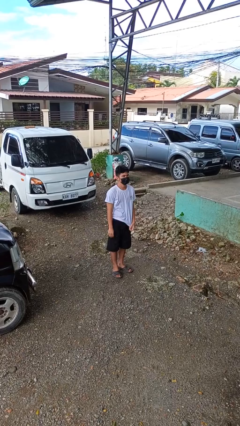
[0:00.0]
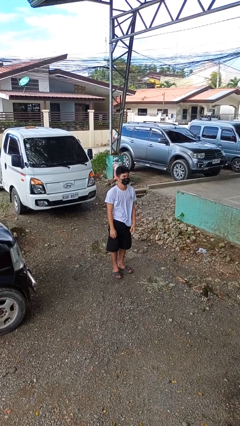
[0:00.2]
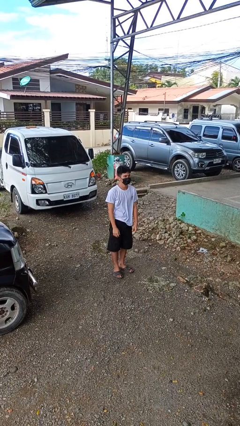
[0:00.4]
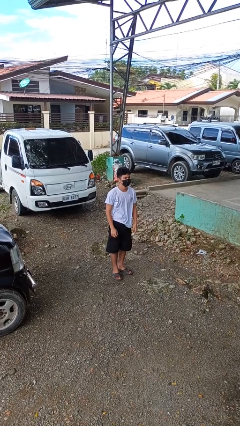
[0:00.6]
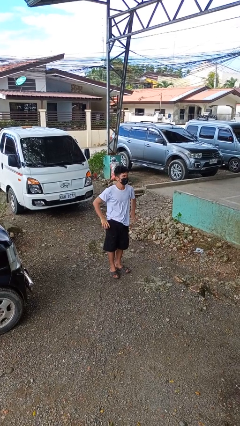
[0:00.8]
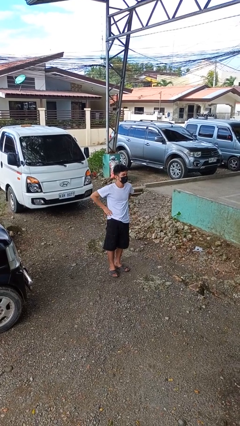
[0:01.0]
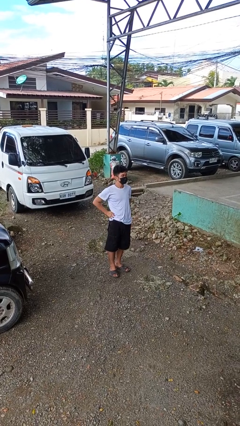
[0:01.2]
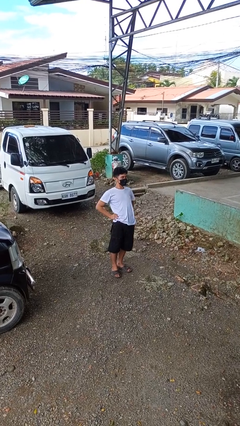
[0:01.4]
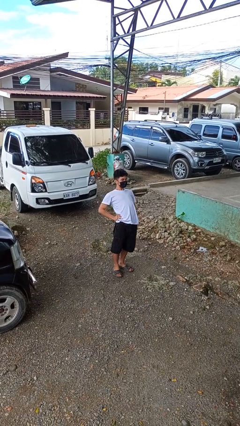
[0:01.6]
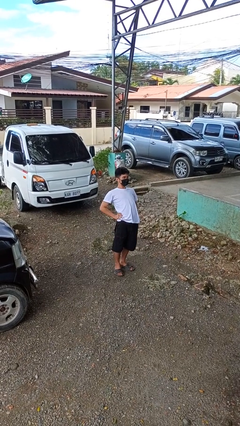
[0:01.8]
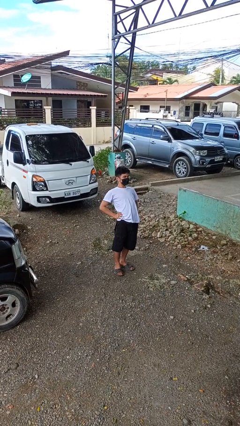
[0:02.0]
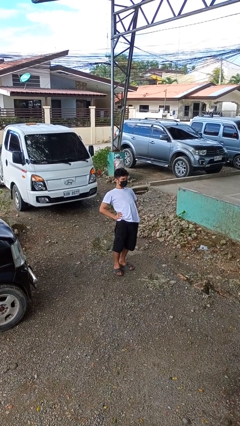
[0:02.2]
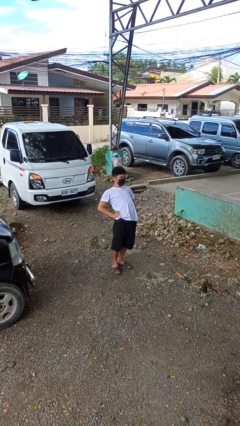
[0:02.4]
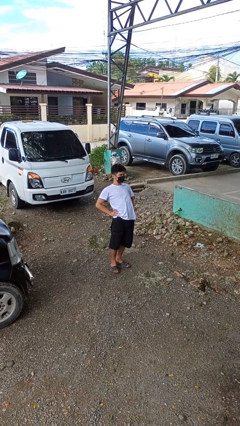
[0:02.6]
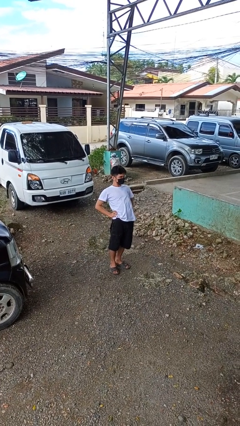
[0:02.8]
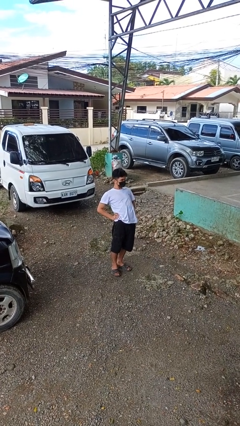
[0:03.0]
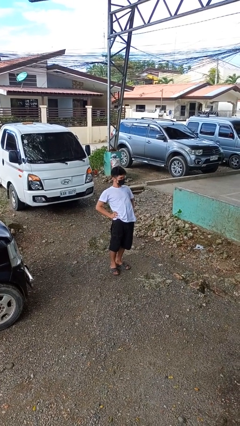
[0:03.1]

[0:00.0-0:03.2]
person stretches back

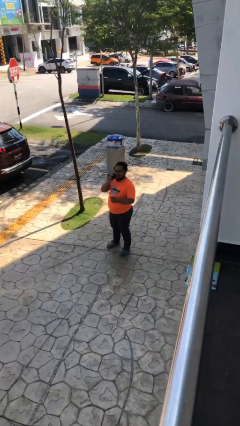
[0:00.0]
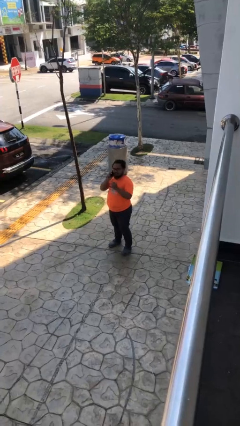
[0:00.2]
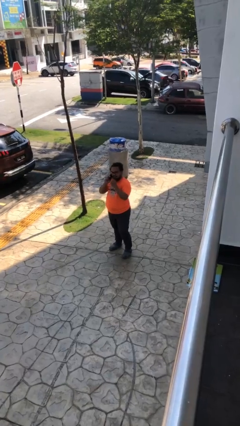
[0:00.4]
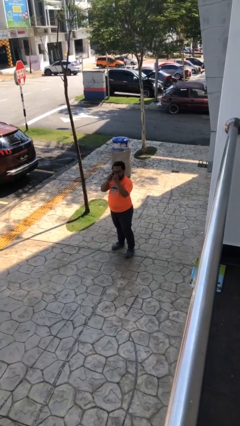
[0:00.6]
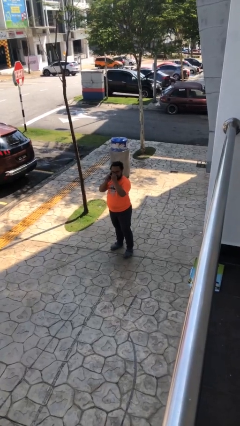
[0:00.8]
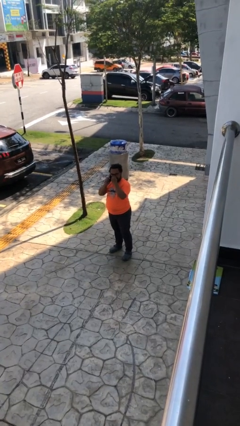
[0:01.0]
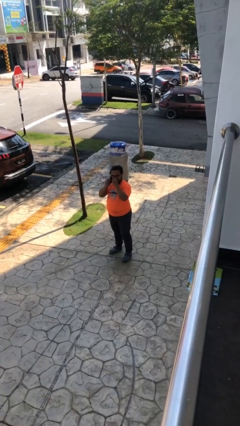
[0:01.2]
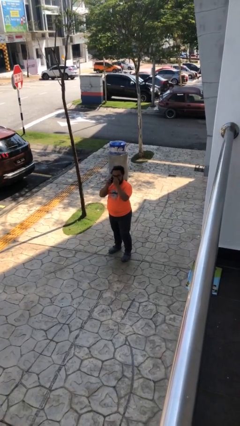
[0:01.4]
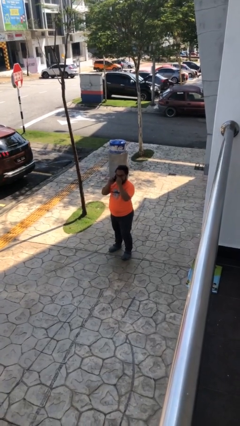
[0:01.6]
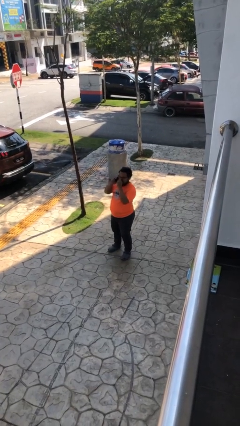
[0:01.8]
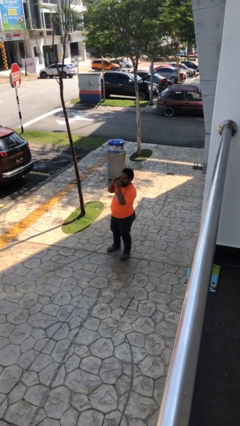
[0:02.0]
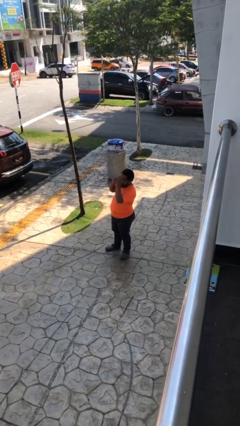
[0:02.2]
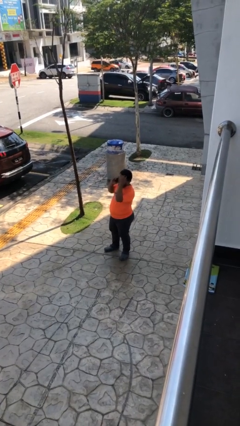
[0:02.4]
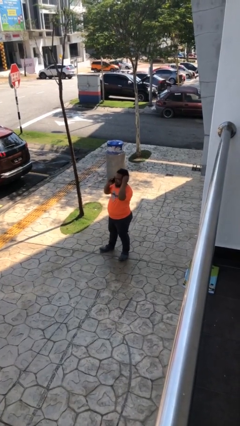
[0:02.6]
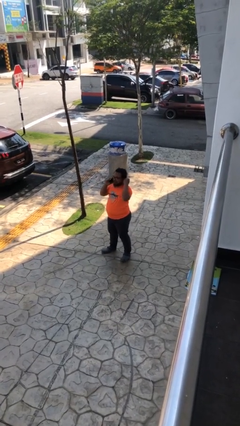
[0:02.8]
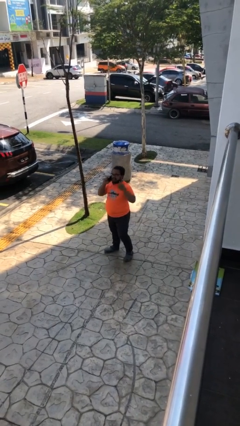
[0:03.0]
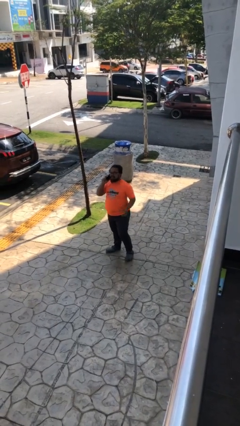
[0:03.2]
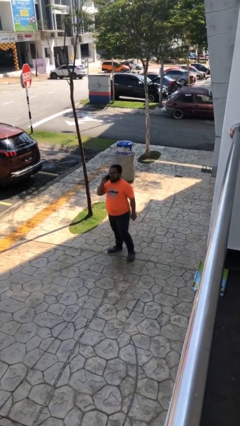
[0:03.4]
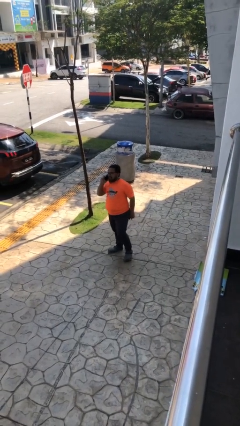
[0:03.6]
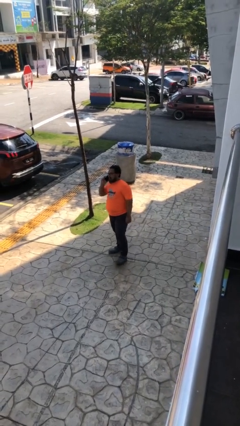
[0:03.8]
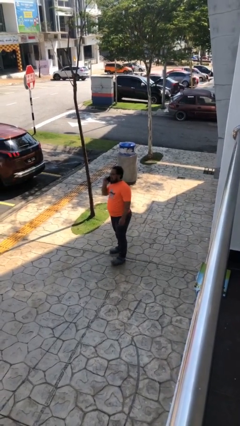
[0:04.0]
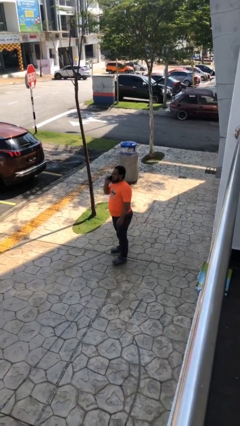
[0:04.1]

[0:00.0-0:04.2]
person talks on phone

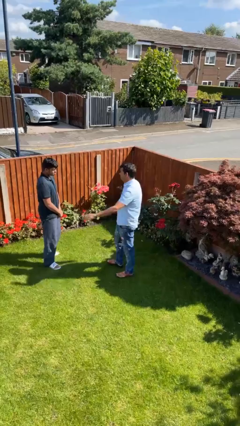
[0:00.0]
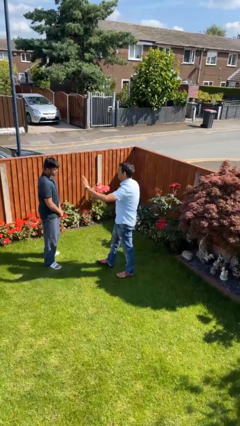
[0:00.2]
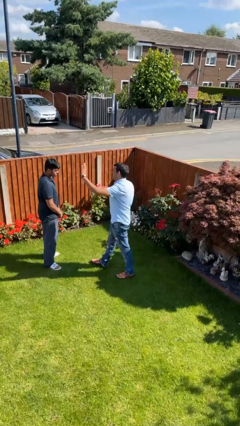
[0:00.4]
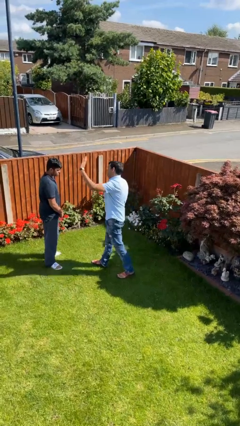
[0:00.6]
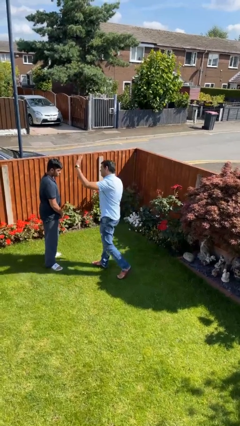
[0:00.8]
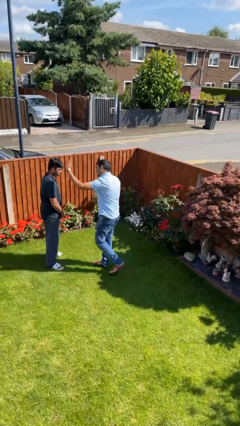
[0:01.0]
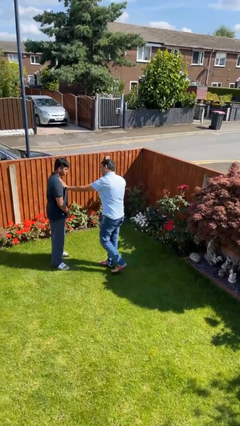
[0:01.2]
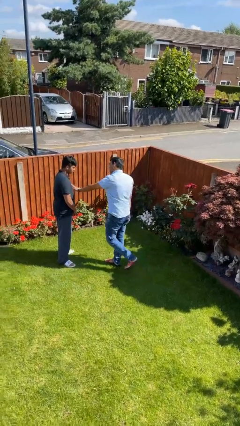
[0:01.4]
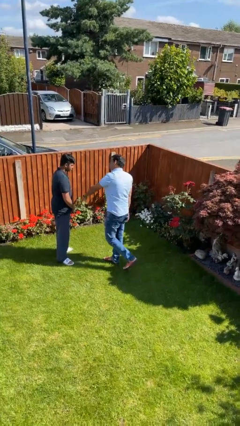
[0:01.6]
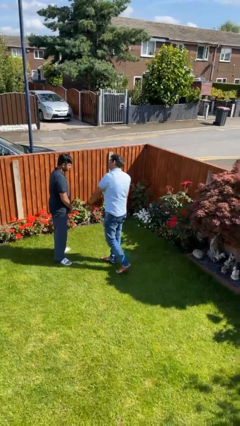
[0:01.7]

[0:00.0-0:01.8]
person shoves person

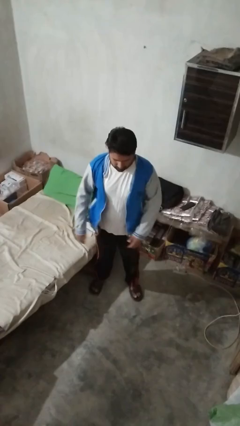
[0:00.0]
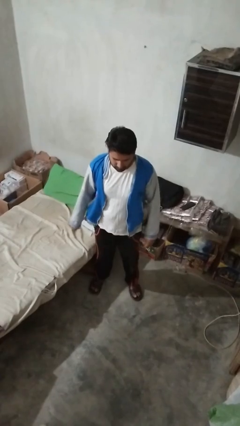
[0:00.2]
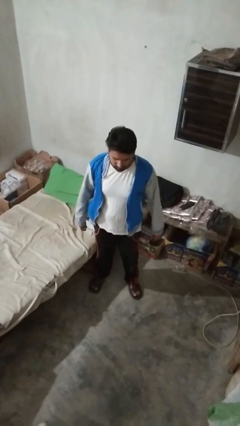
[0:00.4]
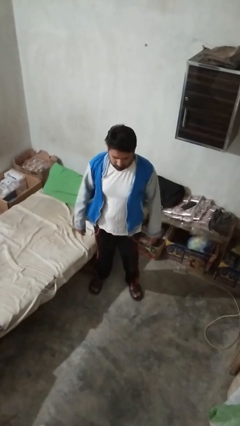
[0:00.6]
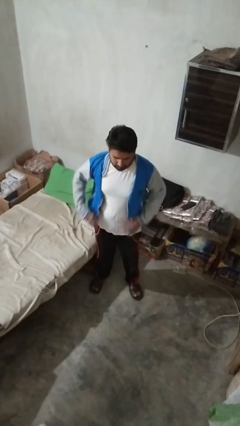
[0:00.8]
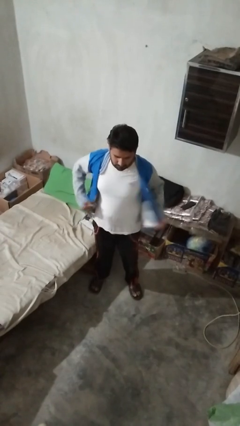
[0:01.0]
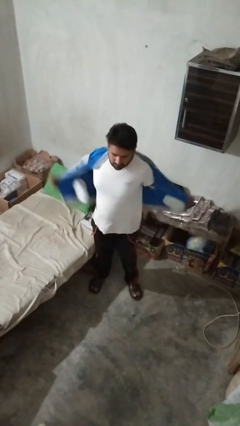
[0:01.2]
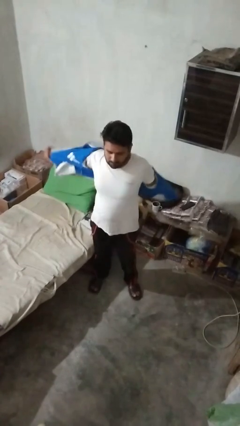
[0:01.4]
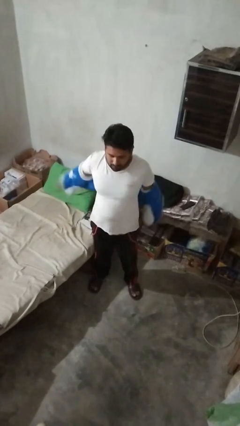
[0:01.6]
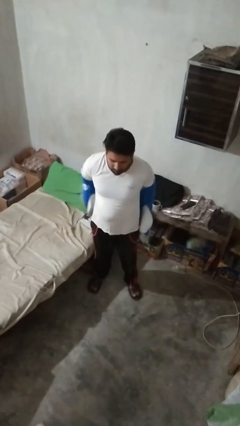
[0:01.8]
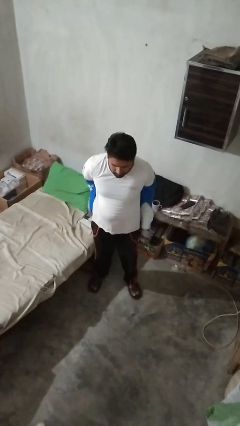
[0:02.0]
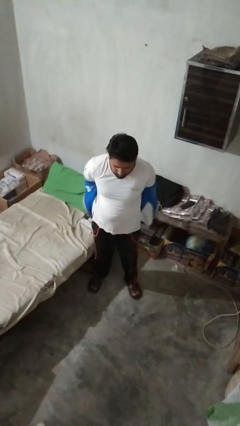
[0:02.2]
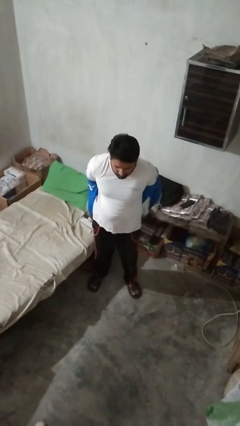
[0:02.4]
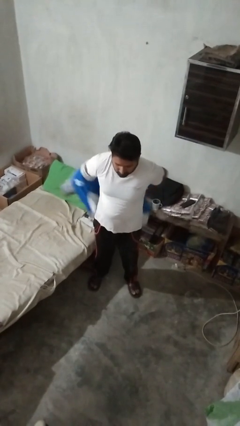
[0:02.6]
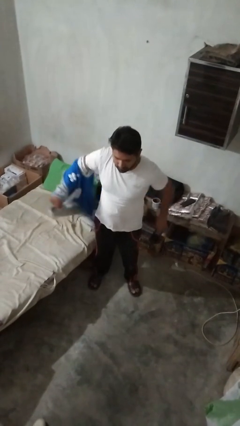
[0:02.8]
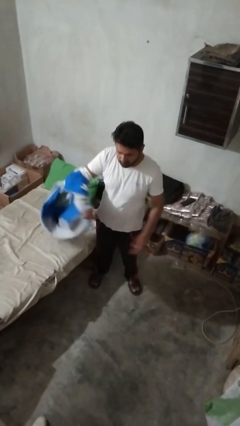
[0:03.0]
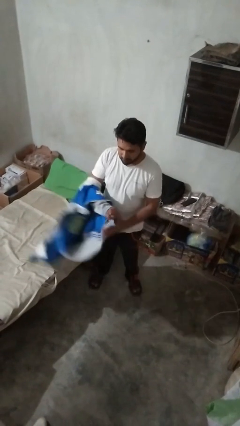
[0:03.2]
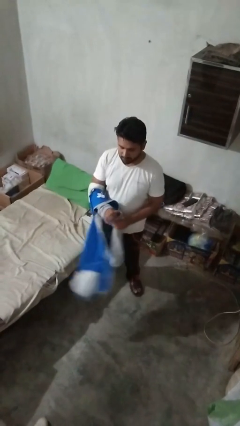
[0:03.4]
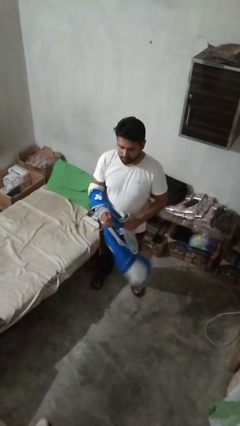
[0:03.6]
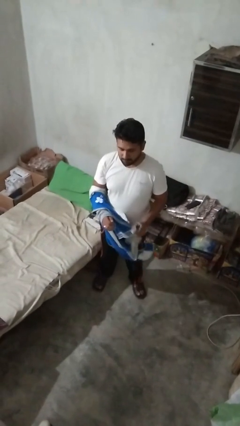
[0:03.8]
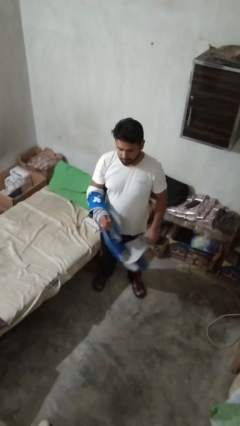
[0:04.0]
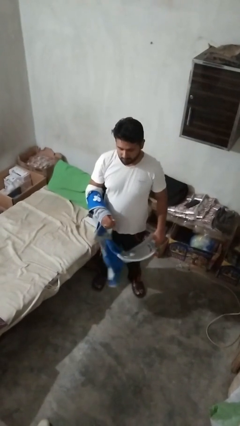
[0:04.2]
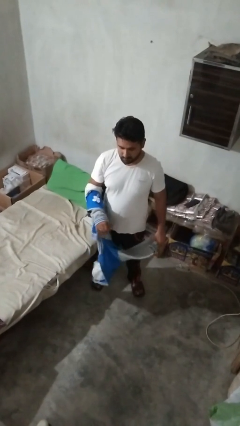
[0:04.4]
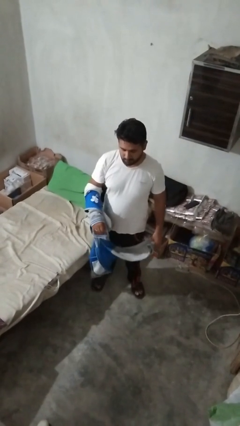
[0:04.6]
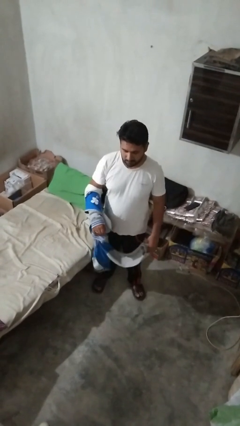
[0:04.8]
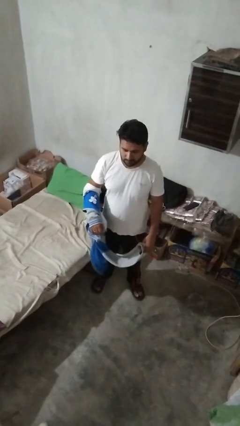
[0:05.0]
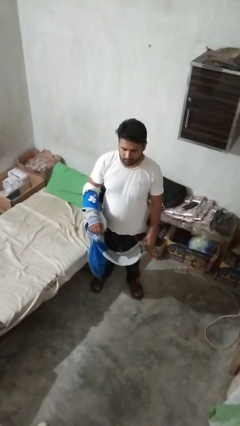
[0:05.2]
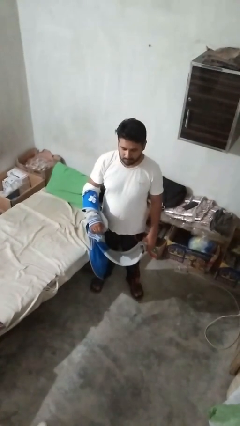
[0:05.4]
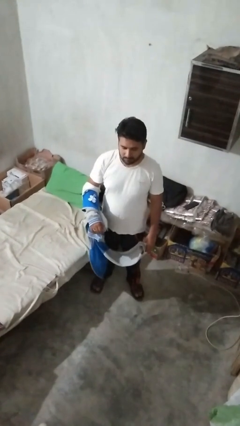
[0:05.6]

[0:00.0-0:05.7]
person takes off jacket

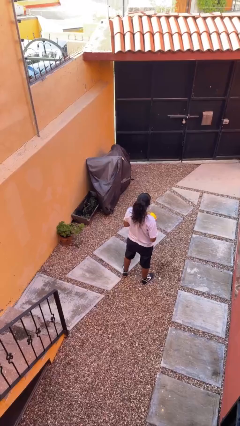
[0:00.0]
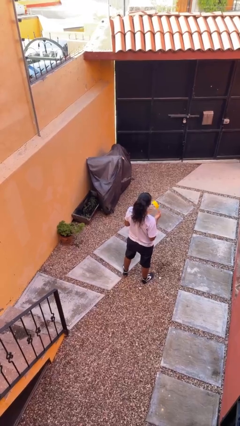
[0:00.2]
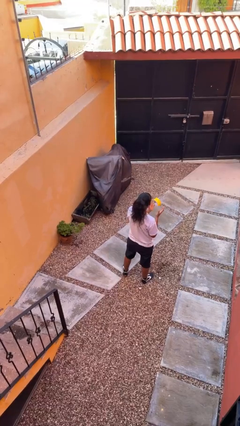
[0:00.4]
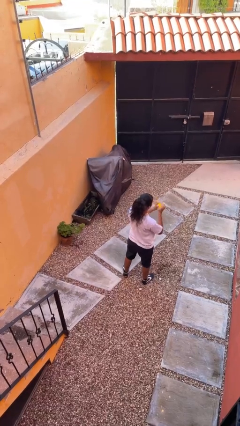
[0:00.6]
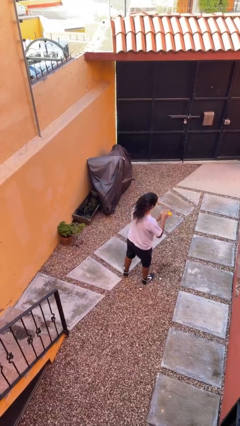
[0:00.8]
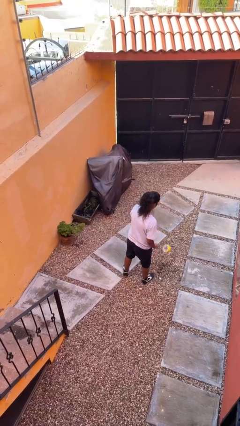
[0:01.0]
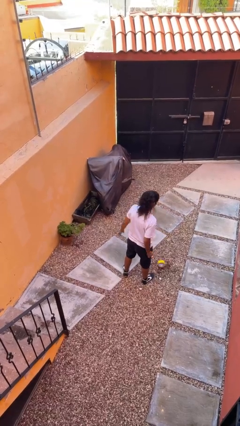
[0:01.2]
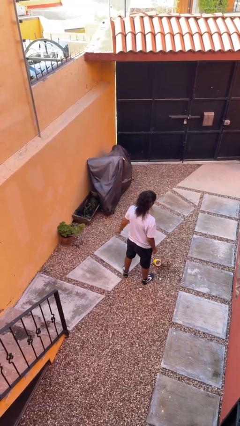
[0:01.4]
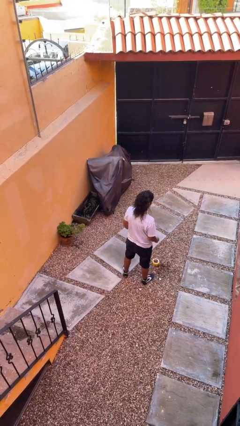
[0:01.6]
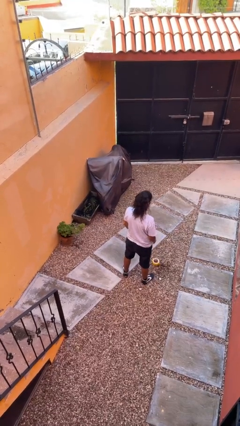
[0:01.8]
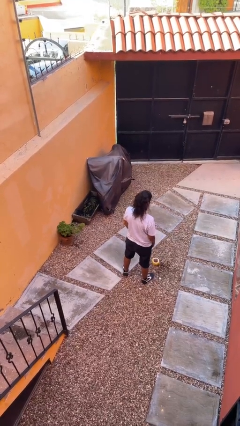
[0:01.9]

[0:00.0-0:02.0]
person drops object

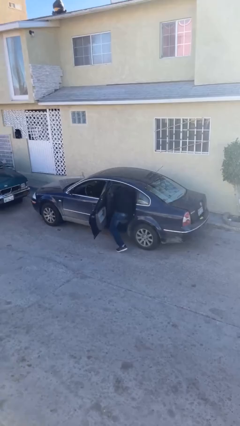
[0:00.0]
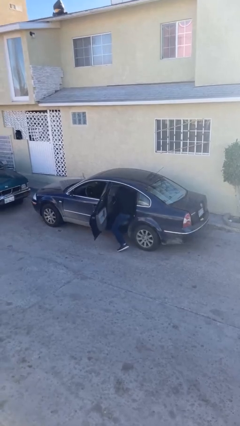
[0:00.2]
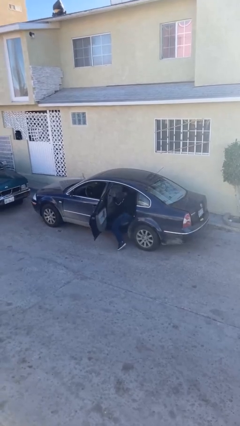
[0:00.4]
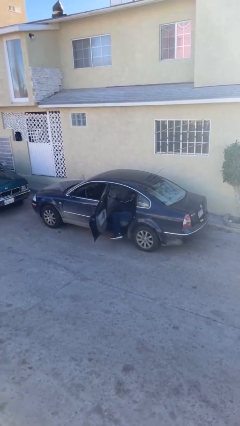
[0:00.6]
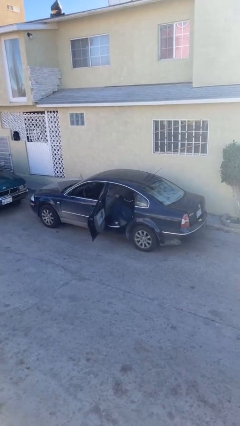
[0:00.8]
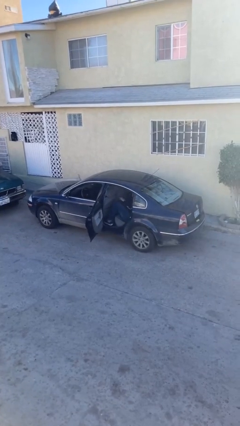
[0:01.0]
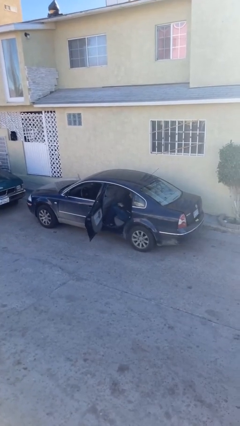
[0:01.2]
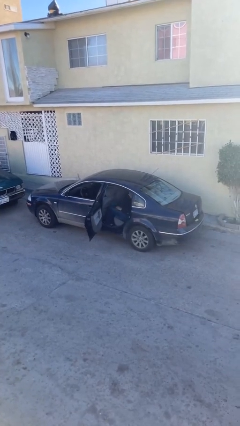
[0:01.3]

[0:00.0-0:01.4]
person enters car
